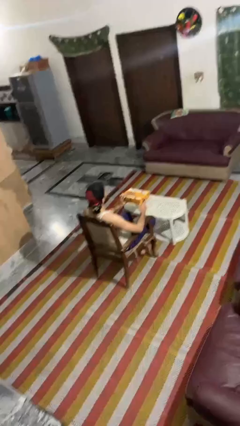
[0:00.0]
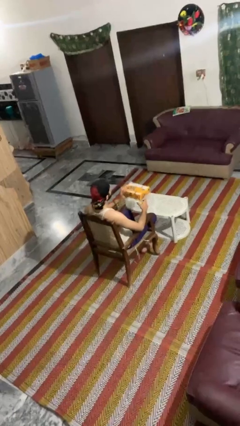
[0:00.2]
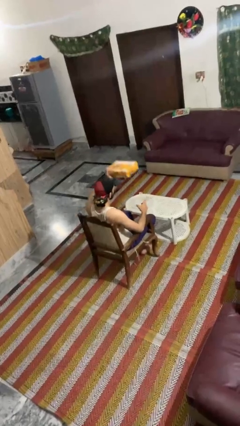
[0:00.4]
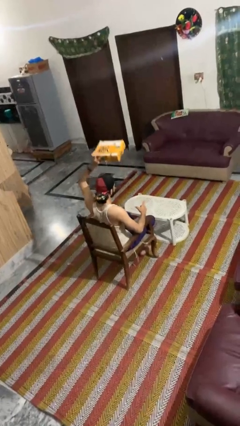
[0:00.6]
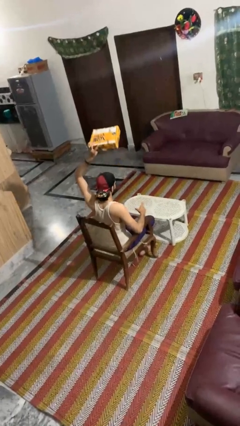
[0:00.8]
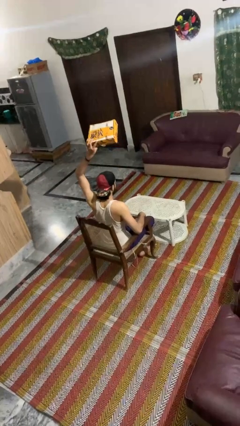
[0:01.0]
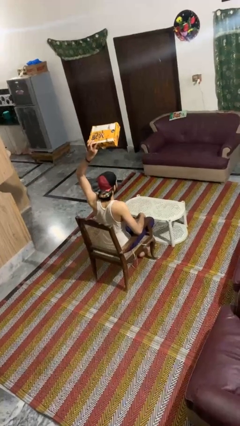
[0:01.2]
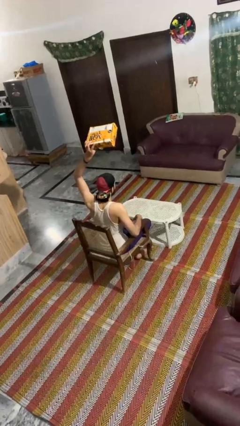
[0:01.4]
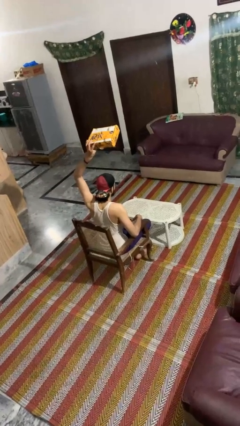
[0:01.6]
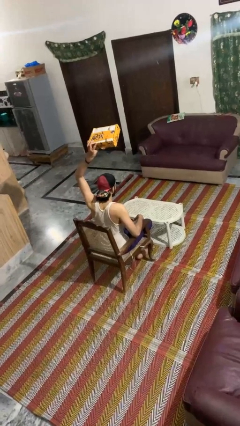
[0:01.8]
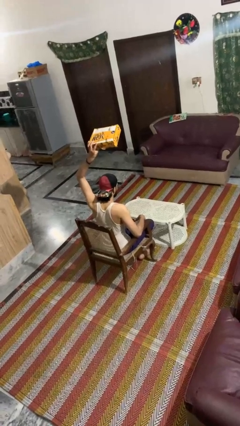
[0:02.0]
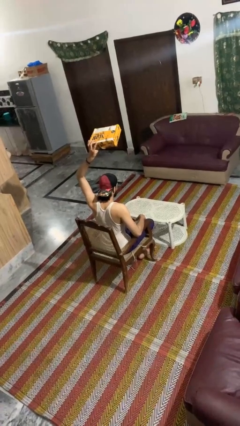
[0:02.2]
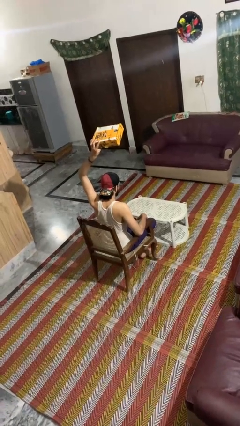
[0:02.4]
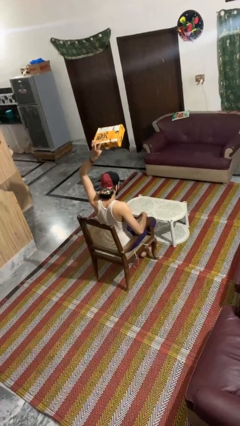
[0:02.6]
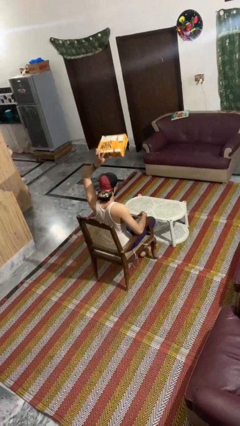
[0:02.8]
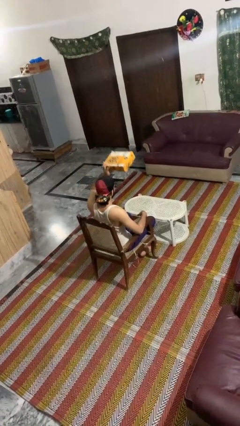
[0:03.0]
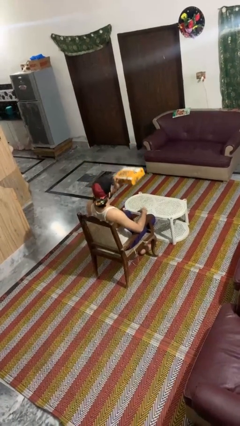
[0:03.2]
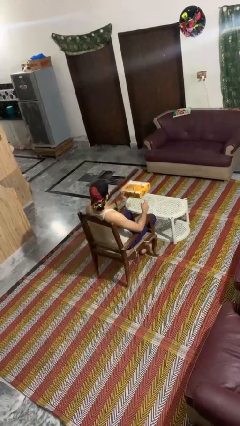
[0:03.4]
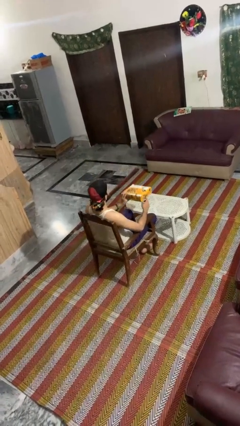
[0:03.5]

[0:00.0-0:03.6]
person holds object above head

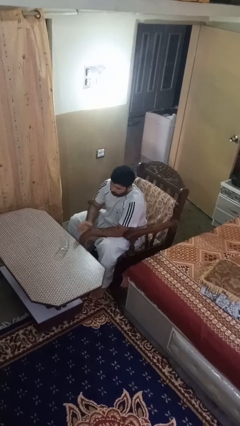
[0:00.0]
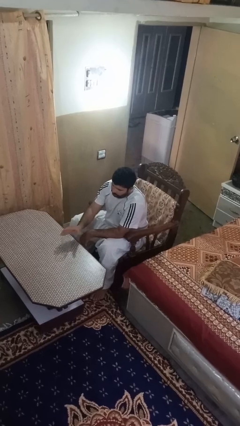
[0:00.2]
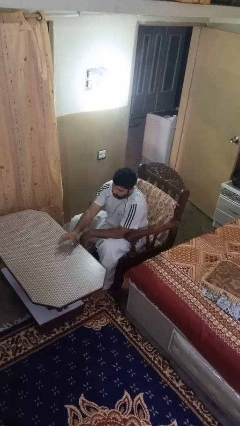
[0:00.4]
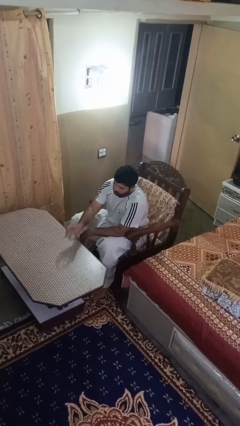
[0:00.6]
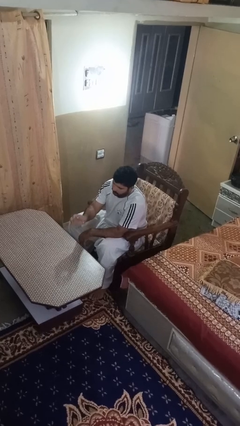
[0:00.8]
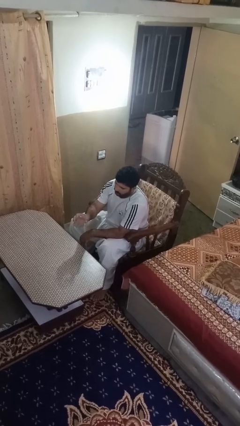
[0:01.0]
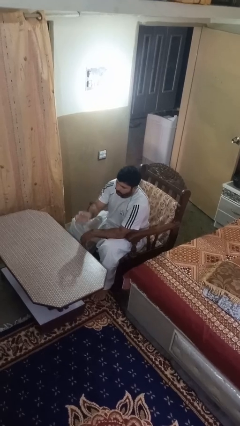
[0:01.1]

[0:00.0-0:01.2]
person picks up object from table

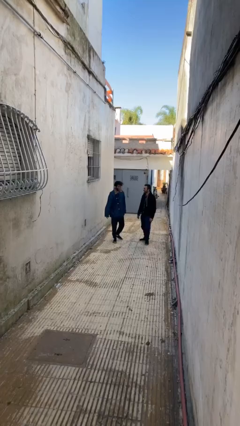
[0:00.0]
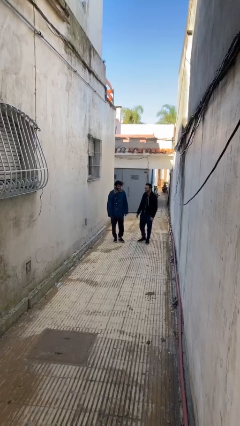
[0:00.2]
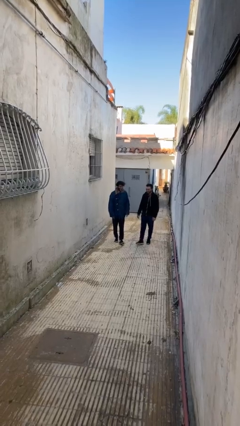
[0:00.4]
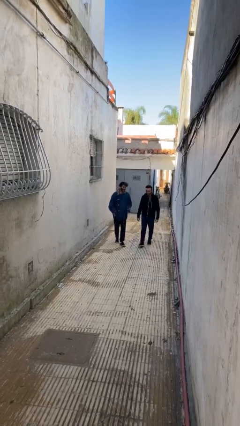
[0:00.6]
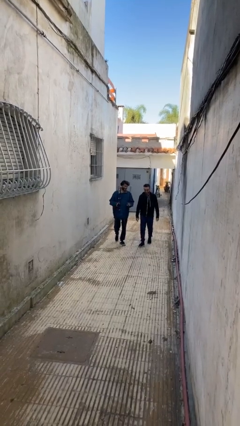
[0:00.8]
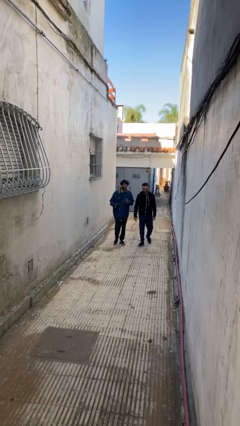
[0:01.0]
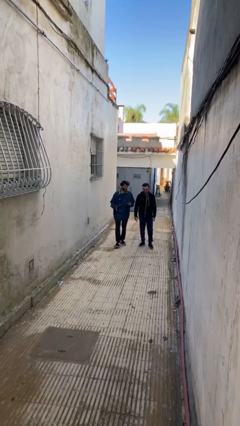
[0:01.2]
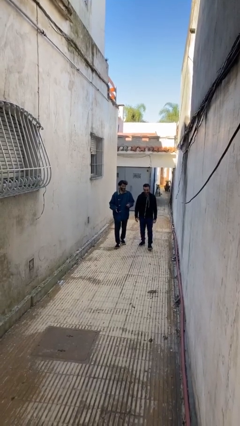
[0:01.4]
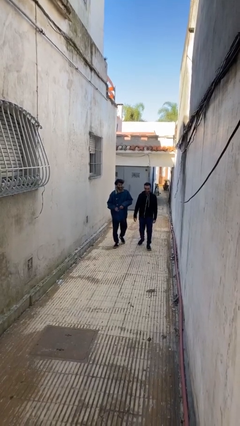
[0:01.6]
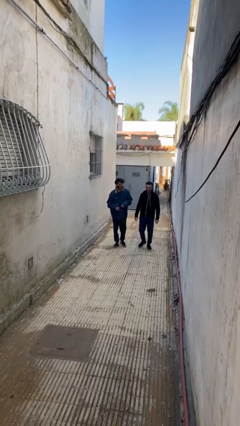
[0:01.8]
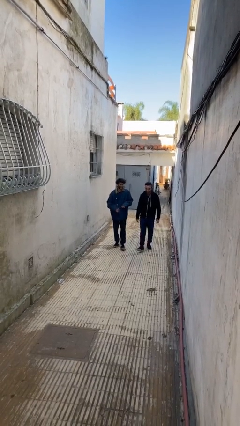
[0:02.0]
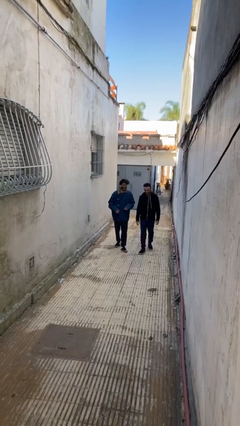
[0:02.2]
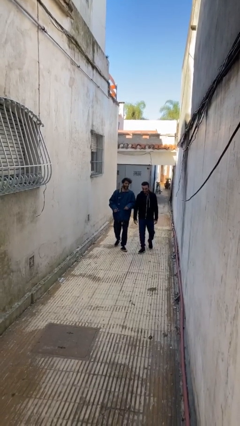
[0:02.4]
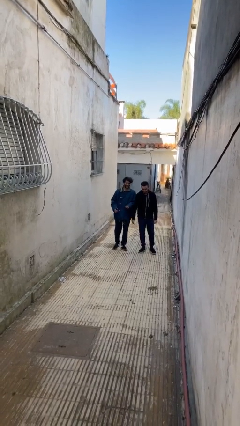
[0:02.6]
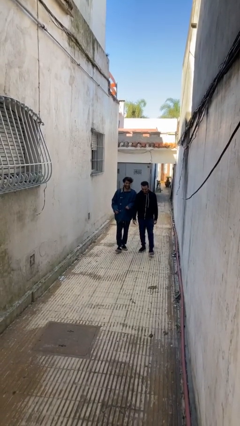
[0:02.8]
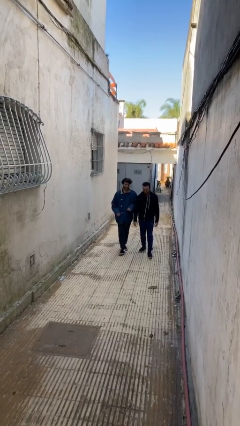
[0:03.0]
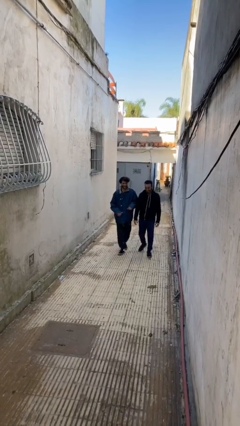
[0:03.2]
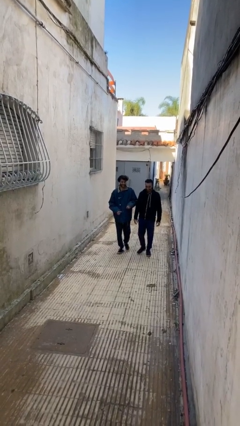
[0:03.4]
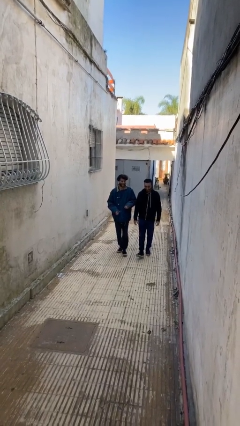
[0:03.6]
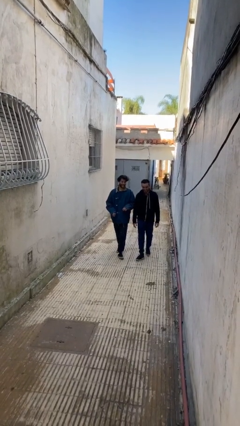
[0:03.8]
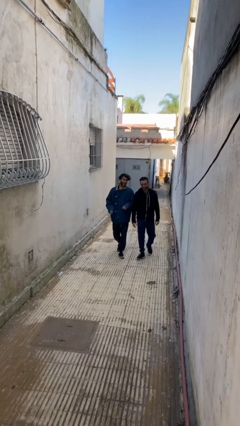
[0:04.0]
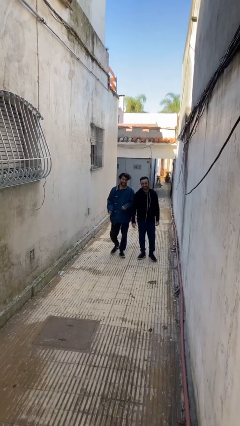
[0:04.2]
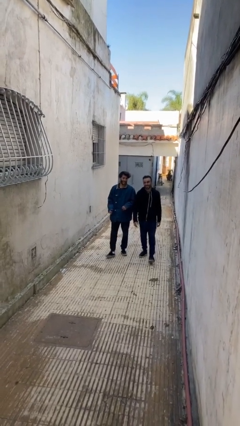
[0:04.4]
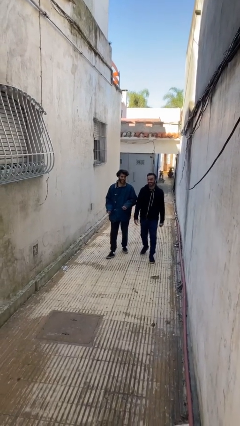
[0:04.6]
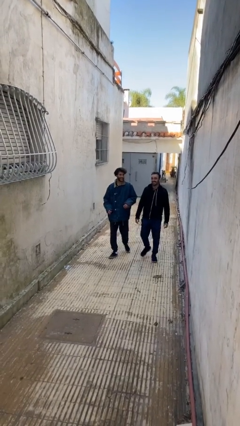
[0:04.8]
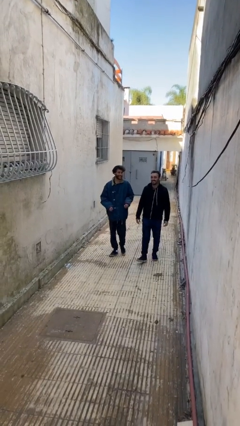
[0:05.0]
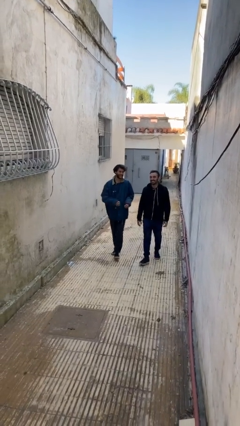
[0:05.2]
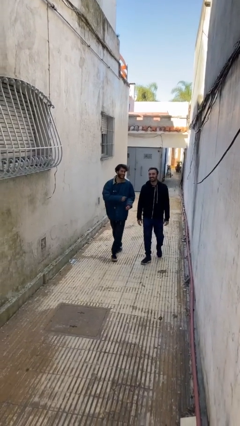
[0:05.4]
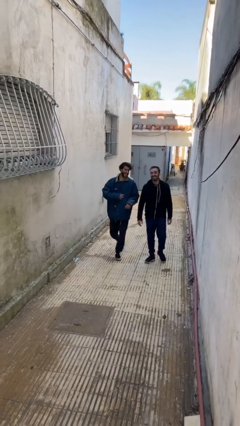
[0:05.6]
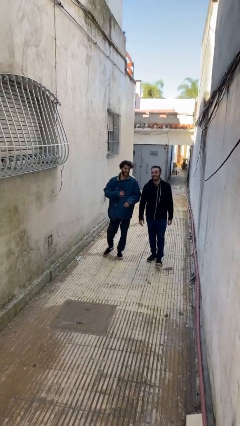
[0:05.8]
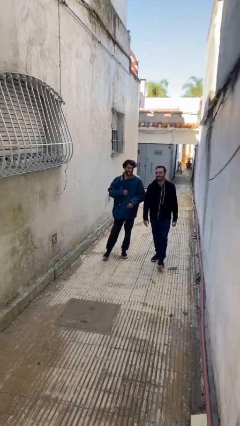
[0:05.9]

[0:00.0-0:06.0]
person talks to person

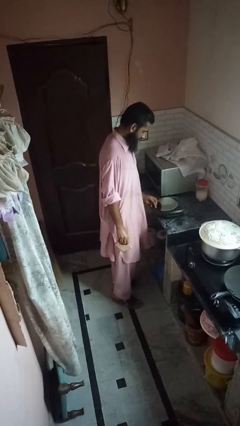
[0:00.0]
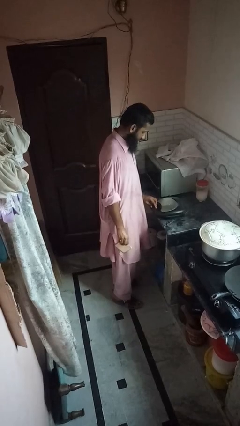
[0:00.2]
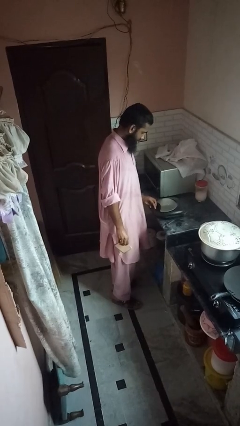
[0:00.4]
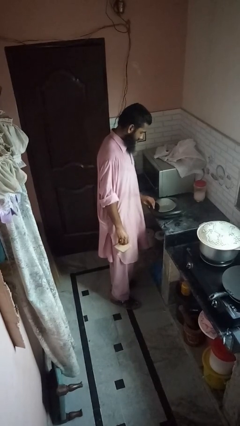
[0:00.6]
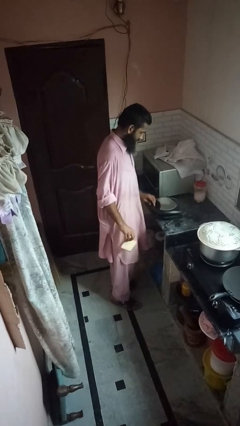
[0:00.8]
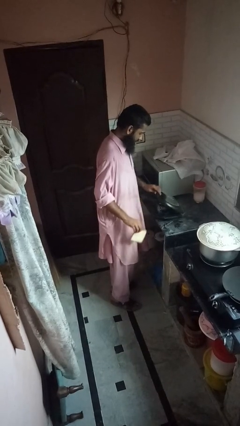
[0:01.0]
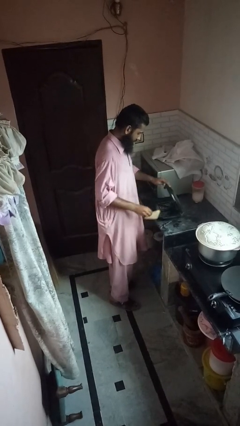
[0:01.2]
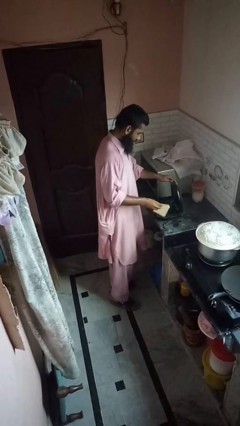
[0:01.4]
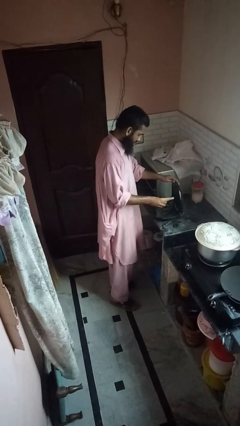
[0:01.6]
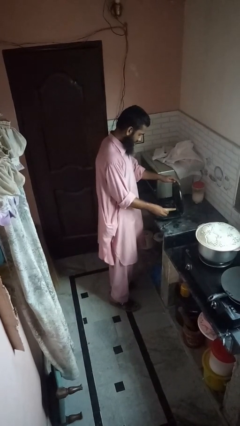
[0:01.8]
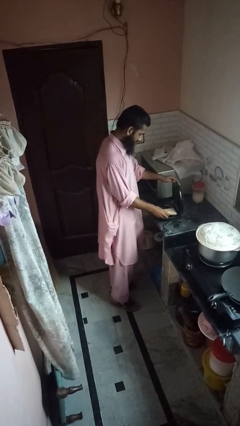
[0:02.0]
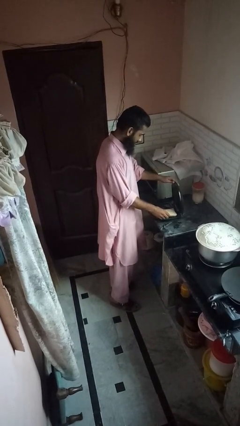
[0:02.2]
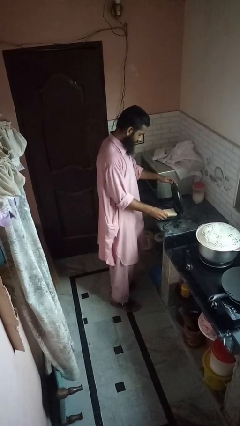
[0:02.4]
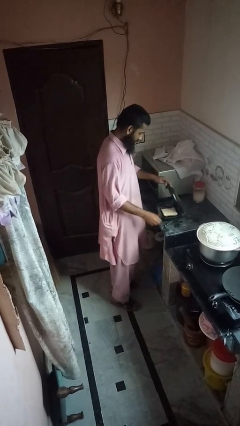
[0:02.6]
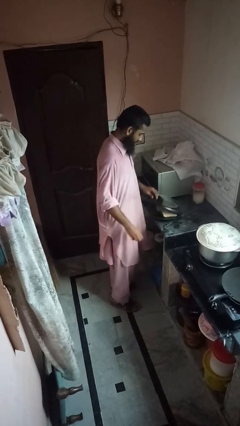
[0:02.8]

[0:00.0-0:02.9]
person puts object into toaster

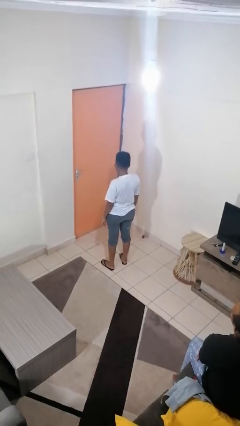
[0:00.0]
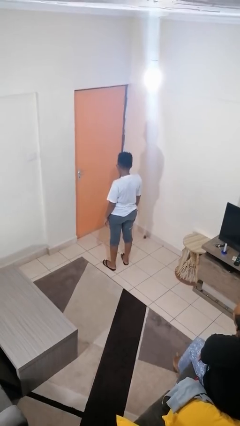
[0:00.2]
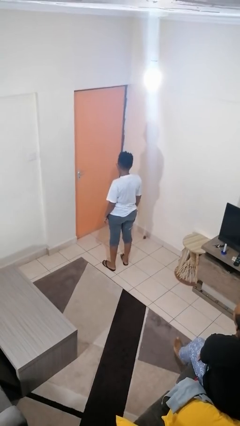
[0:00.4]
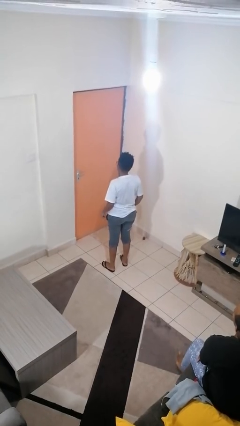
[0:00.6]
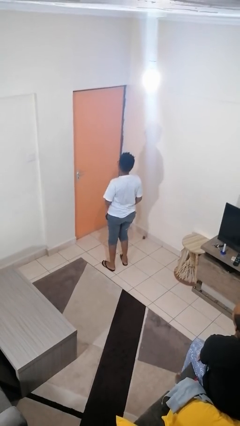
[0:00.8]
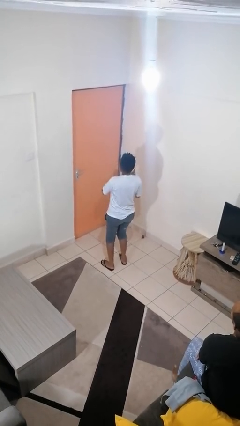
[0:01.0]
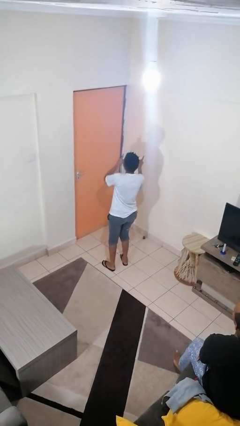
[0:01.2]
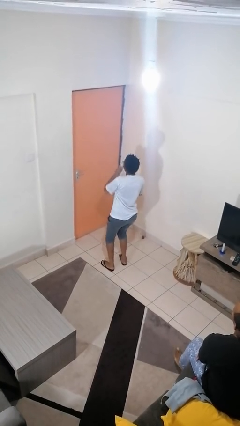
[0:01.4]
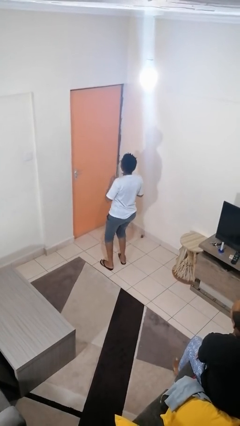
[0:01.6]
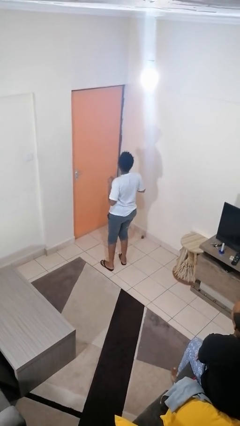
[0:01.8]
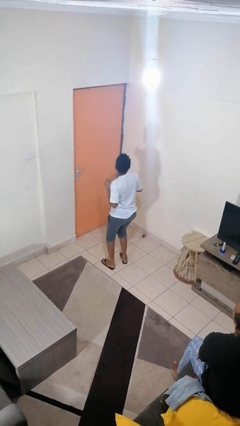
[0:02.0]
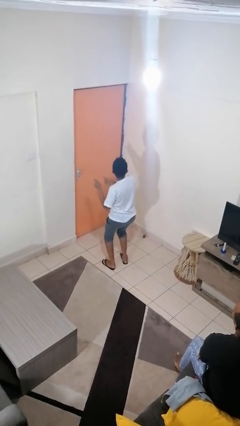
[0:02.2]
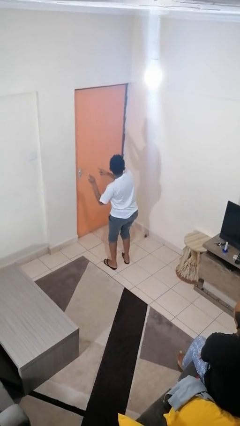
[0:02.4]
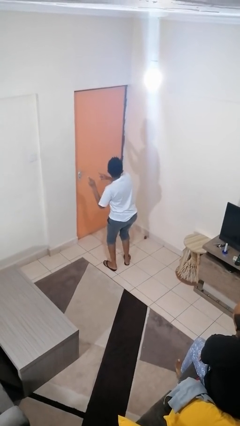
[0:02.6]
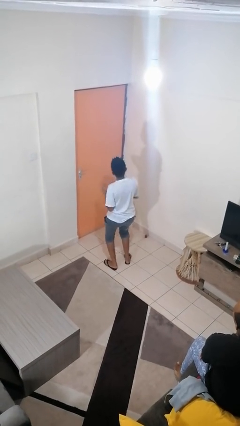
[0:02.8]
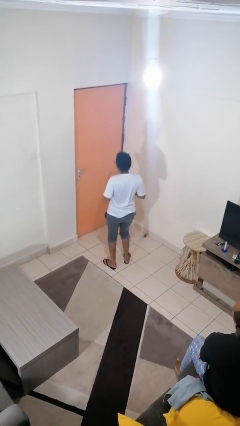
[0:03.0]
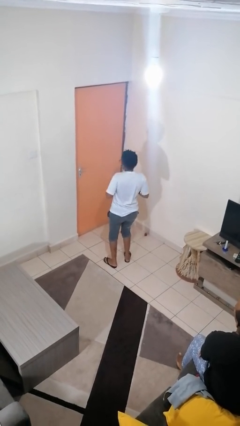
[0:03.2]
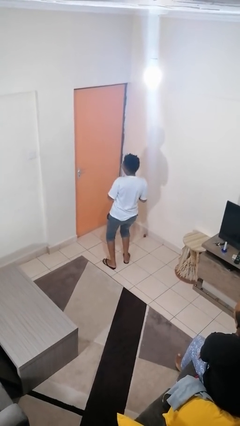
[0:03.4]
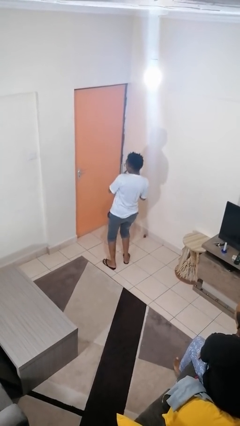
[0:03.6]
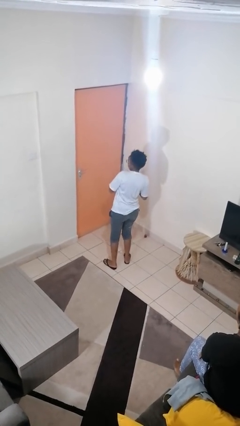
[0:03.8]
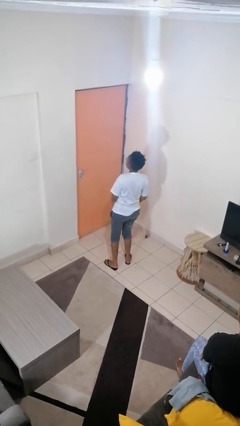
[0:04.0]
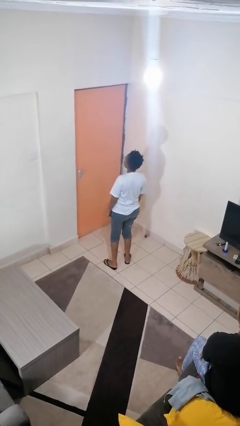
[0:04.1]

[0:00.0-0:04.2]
person dances in place
